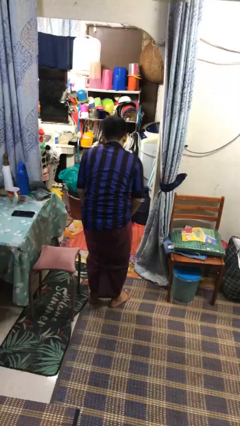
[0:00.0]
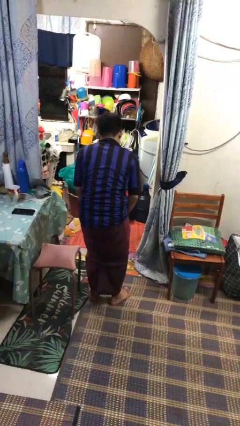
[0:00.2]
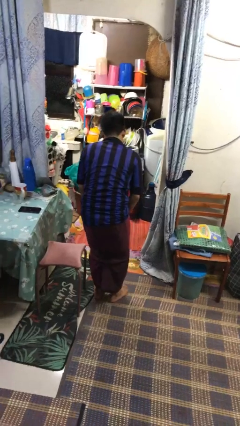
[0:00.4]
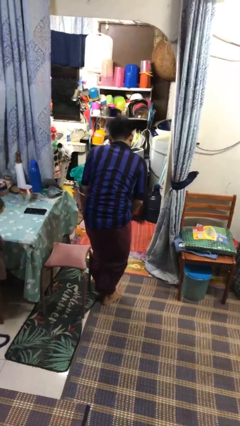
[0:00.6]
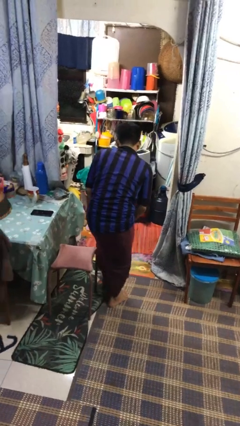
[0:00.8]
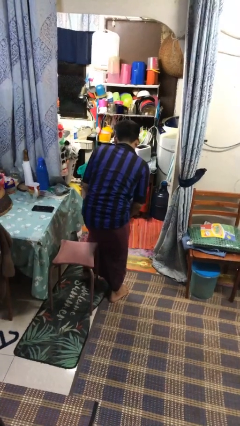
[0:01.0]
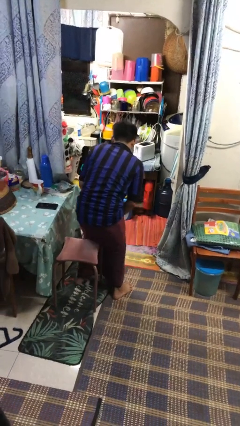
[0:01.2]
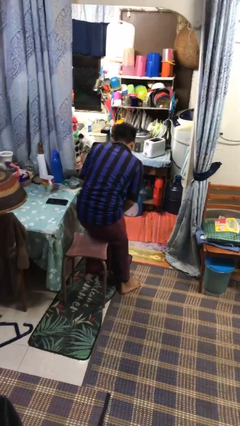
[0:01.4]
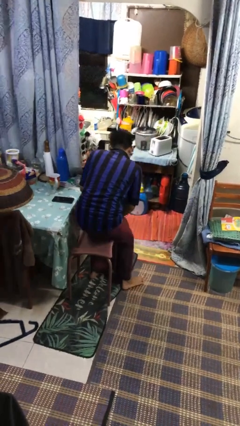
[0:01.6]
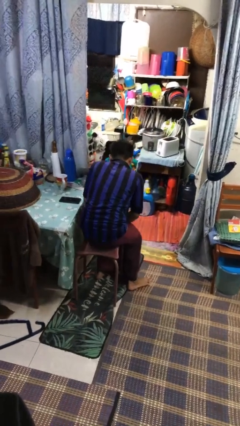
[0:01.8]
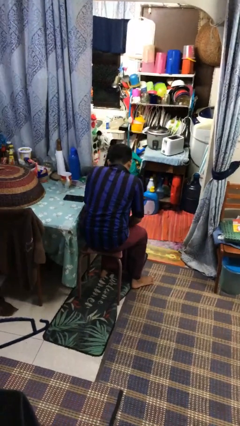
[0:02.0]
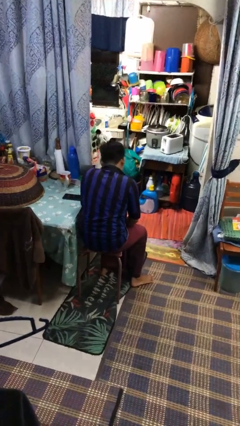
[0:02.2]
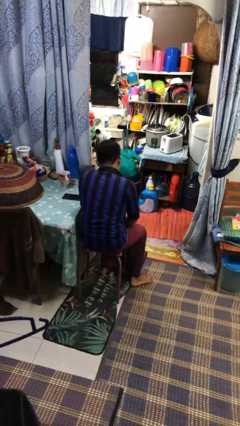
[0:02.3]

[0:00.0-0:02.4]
person sits down

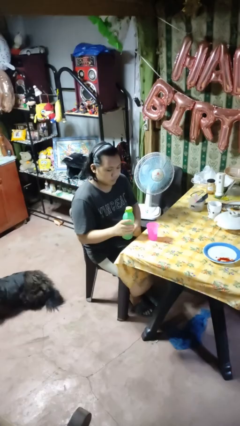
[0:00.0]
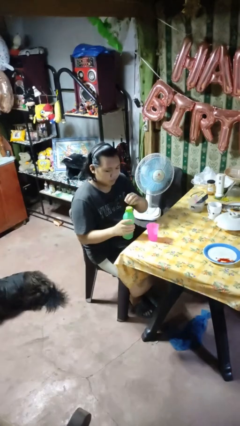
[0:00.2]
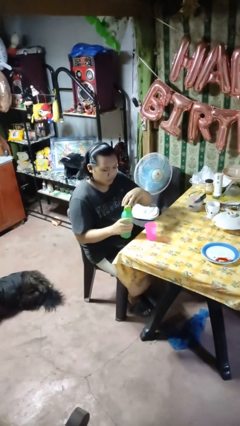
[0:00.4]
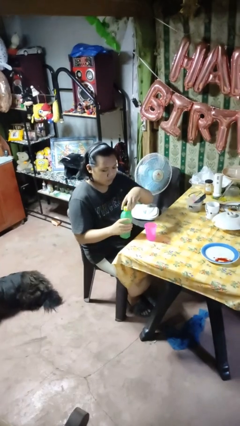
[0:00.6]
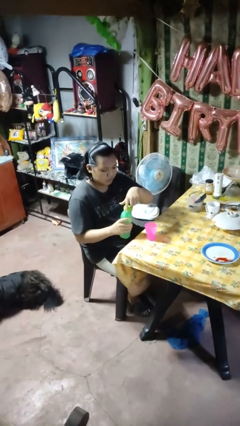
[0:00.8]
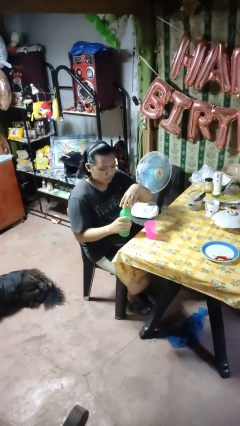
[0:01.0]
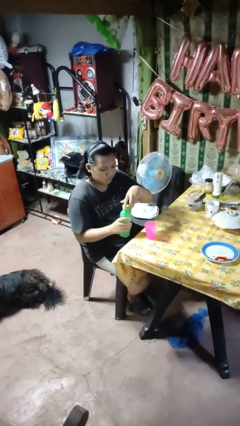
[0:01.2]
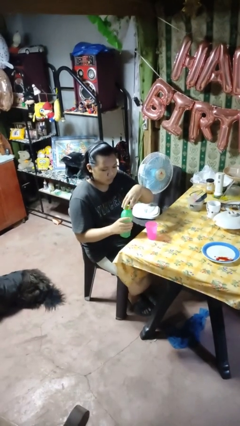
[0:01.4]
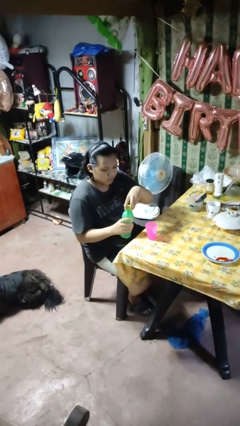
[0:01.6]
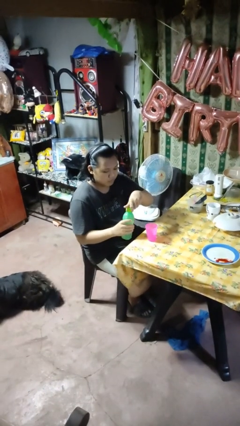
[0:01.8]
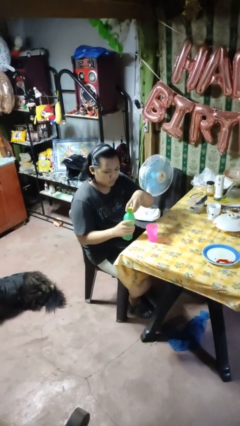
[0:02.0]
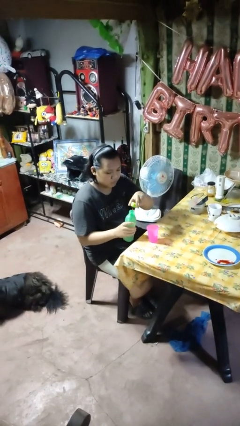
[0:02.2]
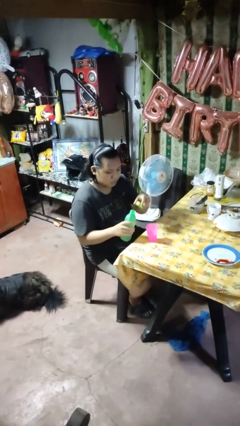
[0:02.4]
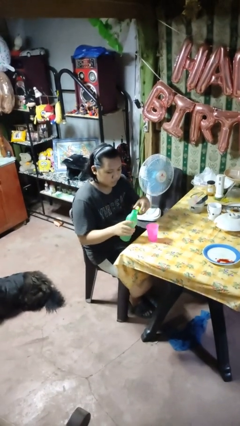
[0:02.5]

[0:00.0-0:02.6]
person unscrews lid from bottle

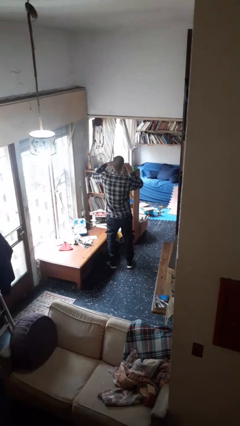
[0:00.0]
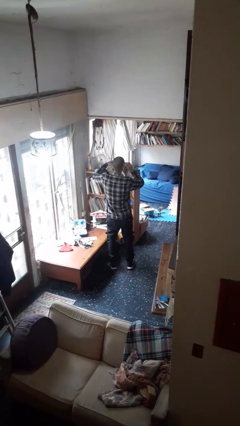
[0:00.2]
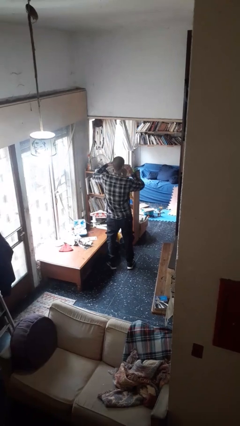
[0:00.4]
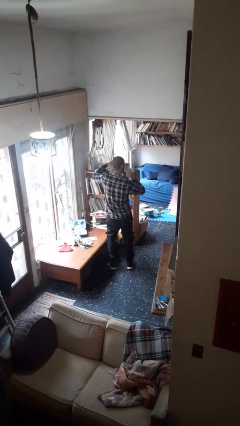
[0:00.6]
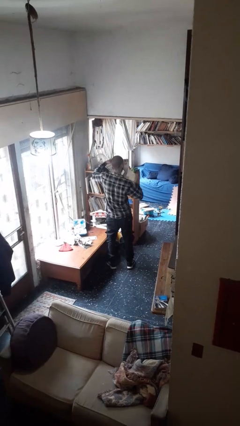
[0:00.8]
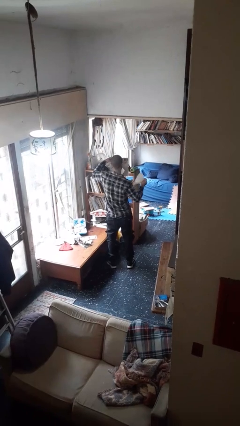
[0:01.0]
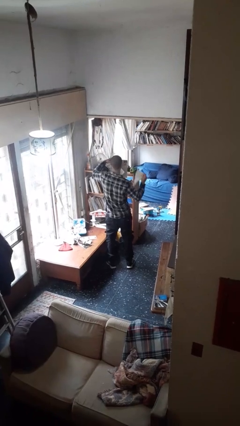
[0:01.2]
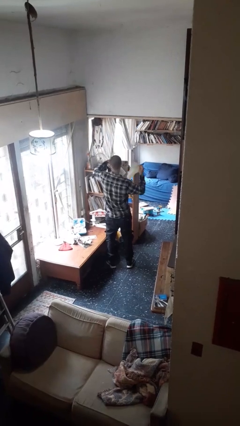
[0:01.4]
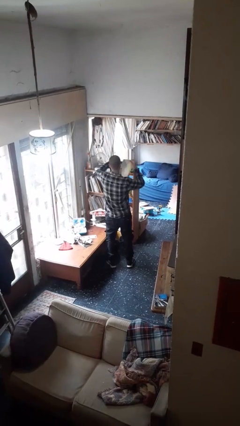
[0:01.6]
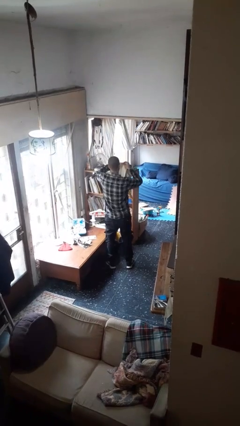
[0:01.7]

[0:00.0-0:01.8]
person tears paper

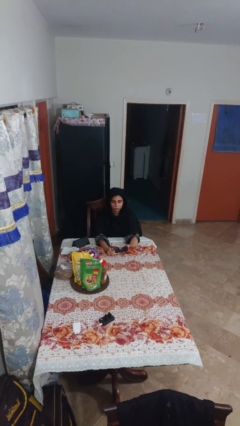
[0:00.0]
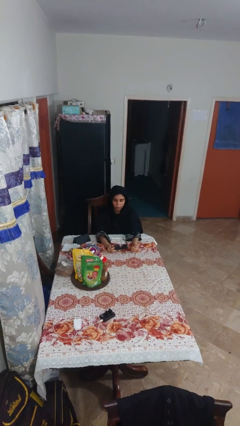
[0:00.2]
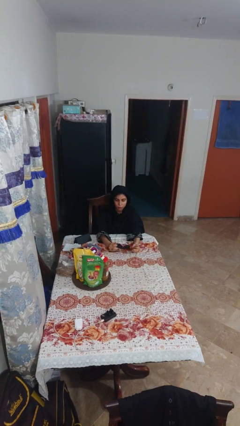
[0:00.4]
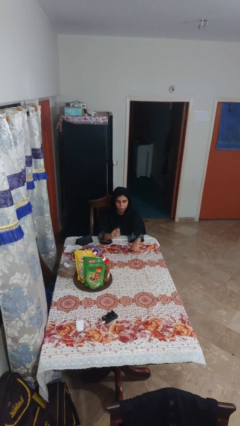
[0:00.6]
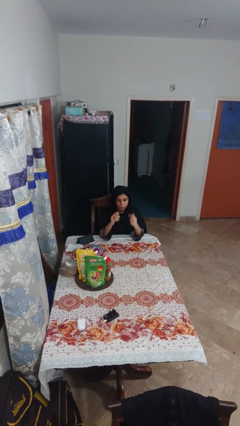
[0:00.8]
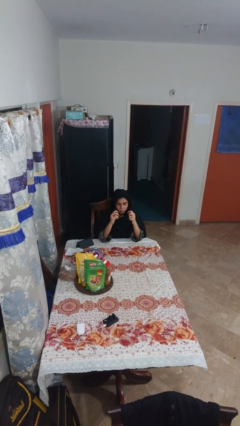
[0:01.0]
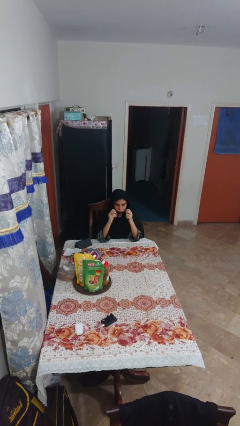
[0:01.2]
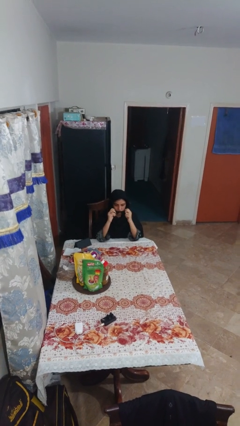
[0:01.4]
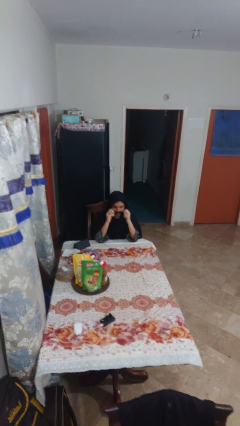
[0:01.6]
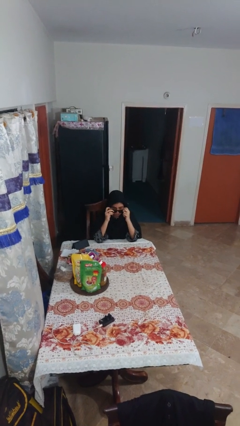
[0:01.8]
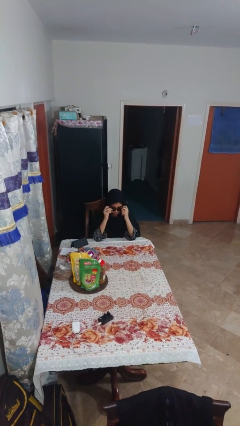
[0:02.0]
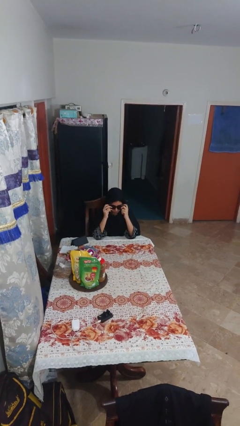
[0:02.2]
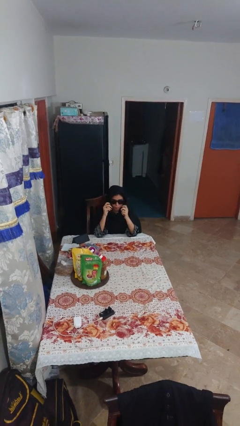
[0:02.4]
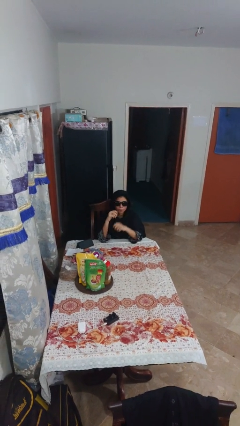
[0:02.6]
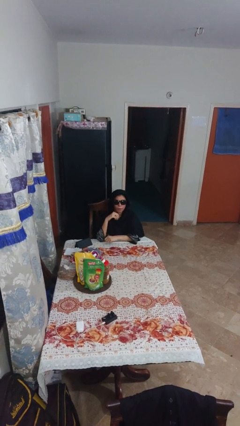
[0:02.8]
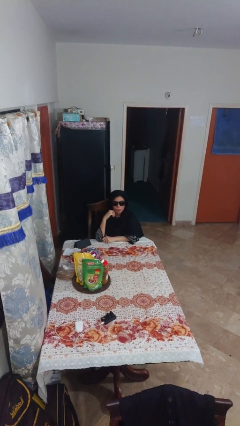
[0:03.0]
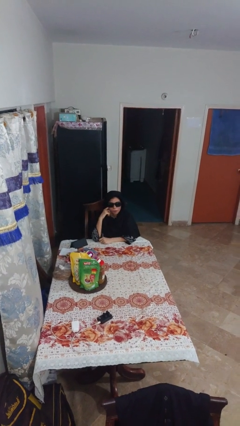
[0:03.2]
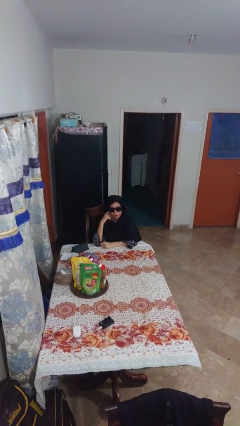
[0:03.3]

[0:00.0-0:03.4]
person puts on sunglasses

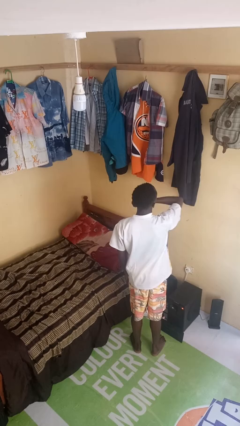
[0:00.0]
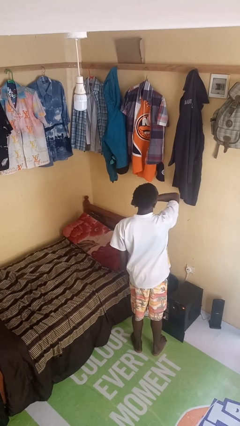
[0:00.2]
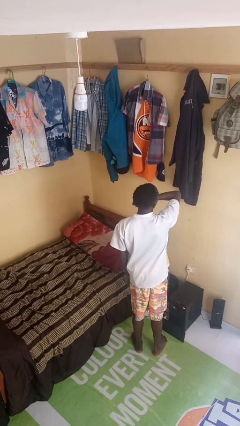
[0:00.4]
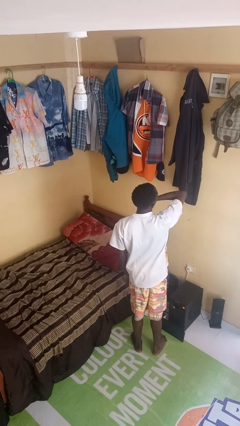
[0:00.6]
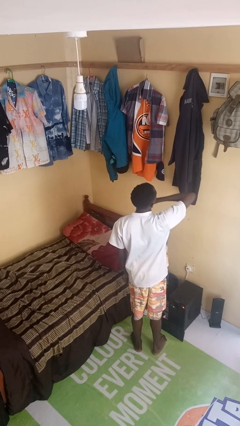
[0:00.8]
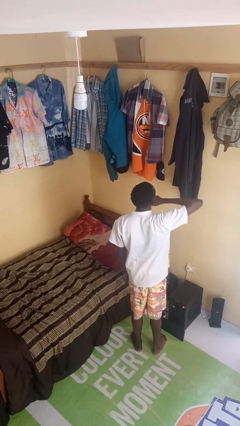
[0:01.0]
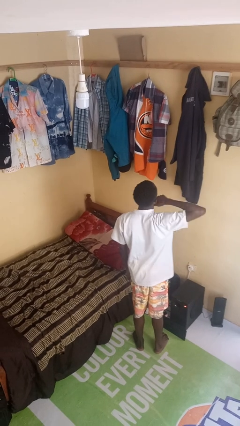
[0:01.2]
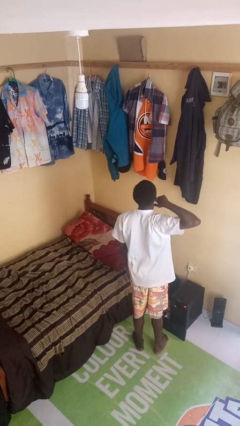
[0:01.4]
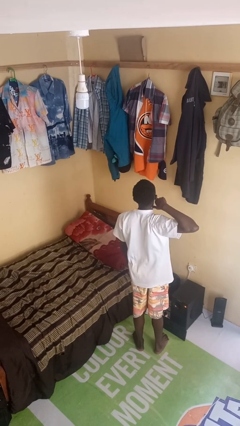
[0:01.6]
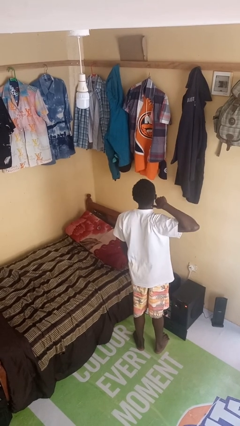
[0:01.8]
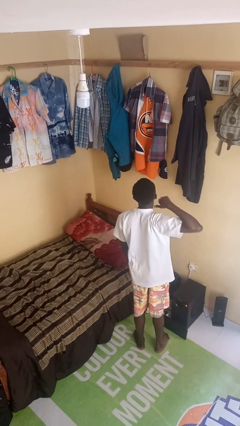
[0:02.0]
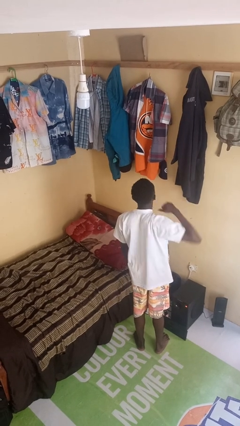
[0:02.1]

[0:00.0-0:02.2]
person gestures cut

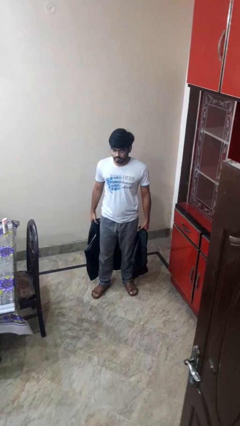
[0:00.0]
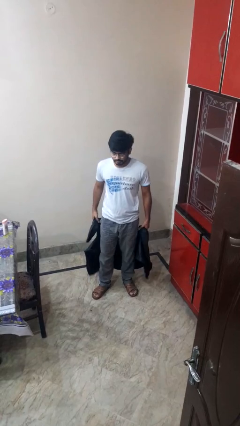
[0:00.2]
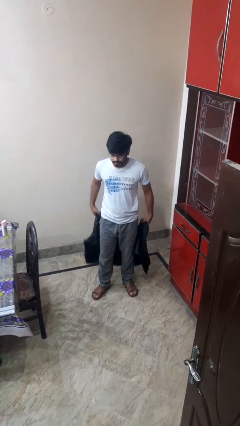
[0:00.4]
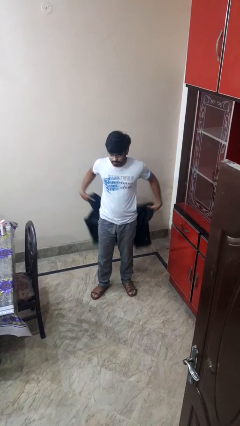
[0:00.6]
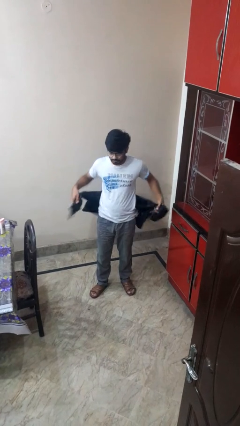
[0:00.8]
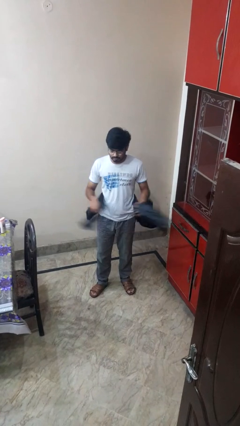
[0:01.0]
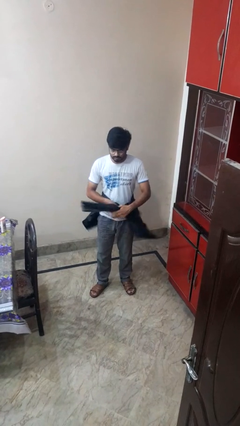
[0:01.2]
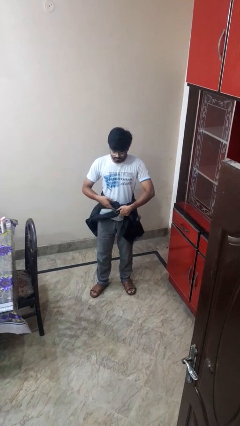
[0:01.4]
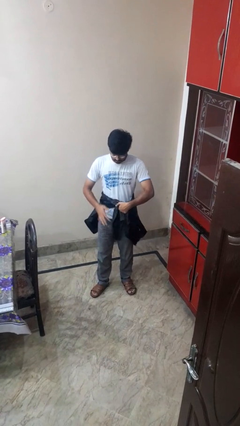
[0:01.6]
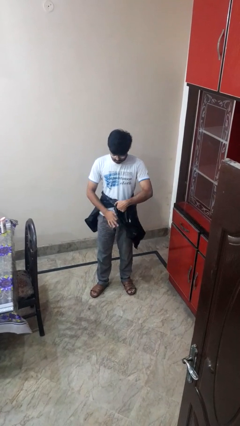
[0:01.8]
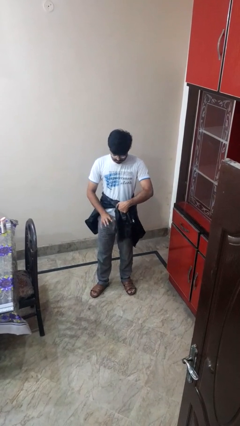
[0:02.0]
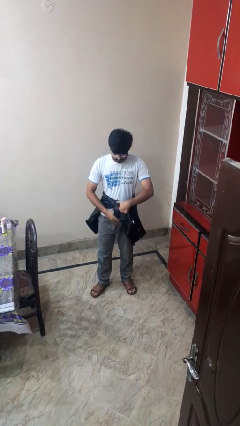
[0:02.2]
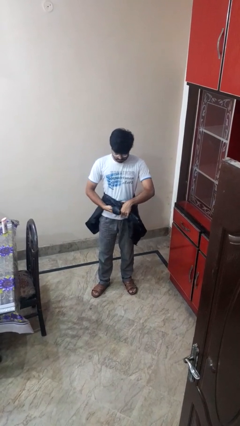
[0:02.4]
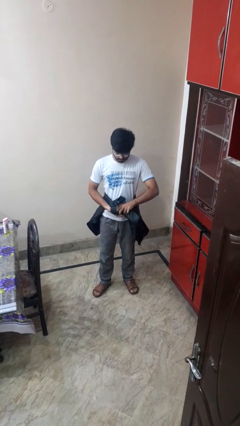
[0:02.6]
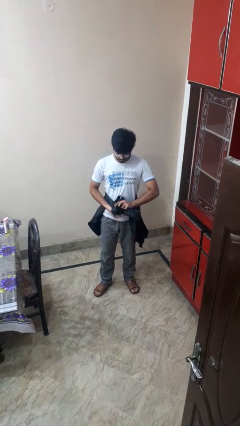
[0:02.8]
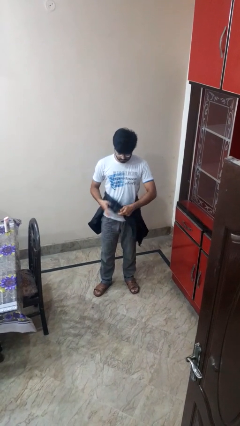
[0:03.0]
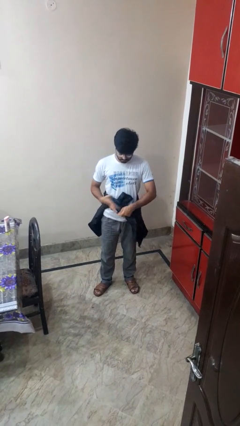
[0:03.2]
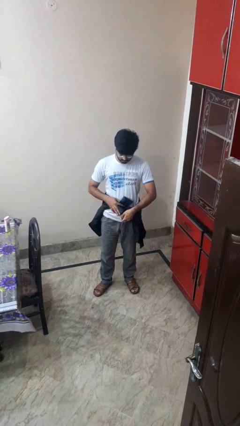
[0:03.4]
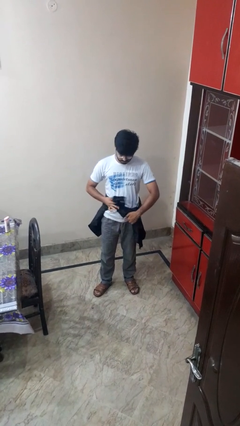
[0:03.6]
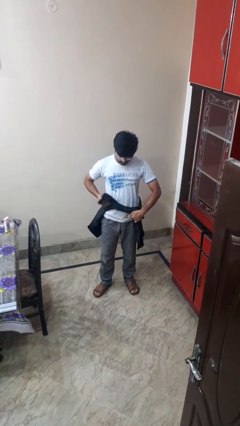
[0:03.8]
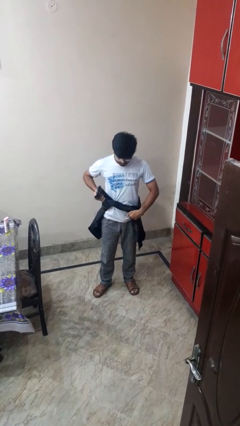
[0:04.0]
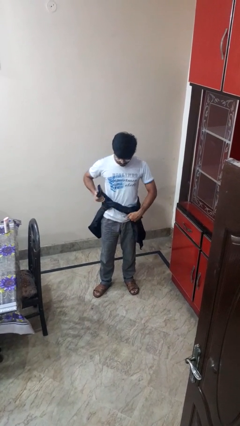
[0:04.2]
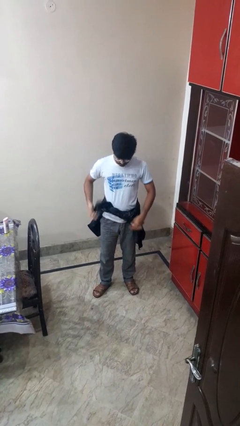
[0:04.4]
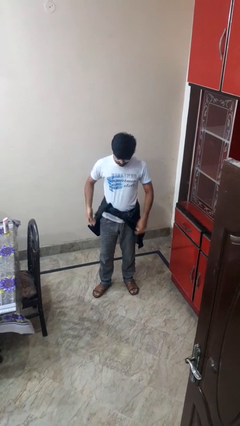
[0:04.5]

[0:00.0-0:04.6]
person ties jacket around waist

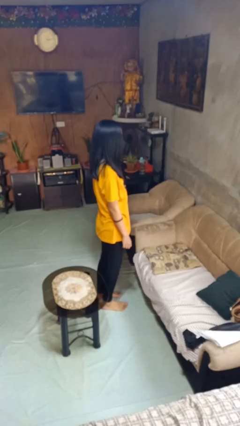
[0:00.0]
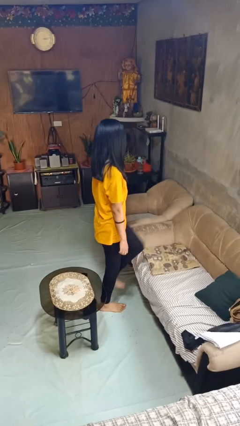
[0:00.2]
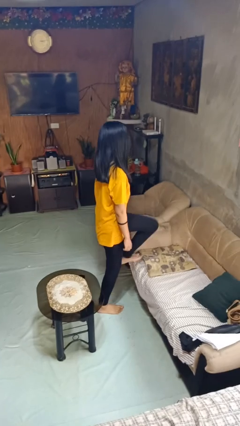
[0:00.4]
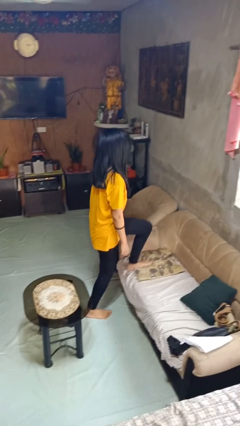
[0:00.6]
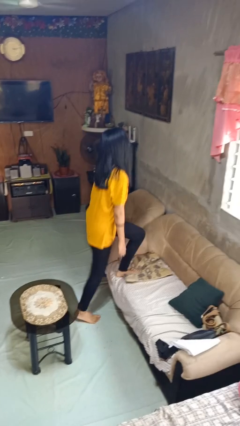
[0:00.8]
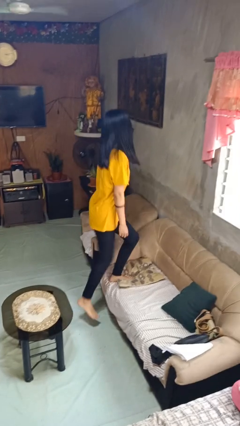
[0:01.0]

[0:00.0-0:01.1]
person climbs on couch
